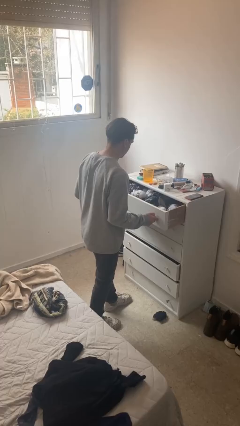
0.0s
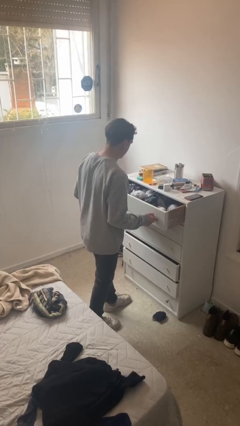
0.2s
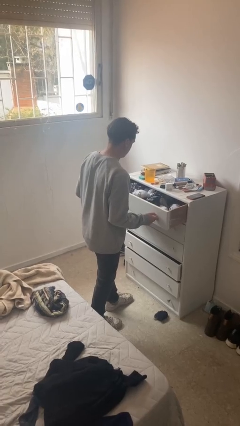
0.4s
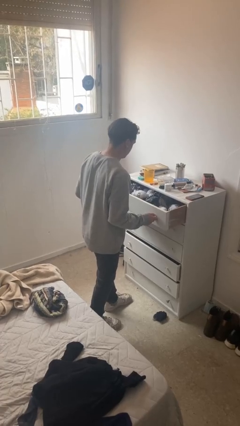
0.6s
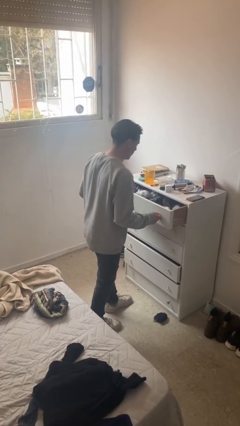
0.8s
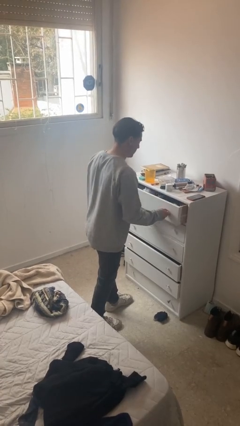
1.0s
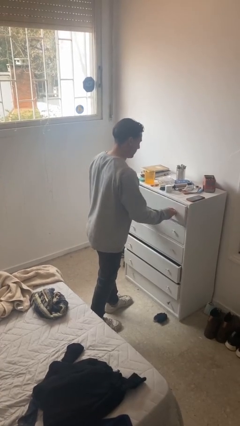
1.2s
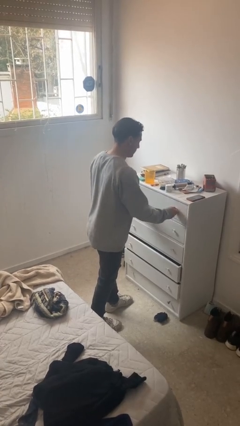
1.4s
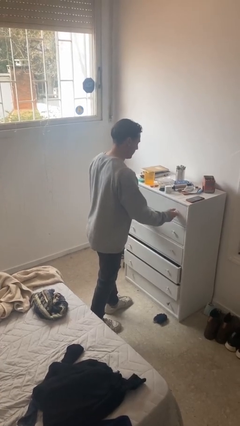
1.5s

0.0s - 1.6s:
person closes dresser drawer

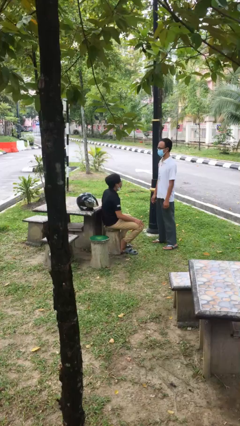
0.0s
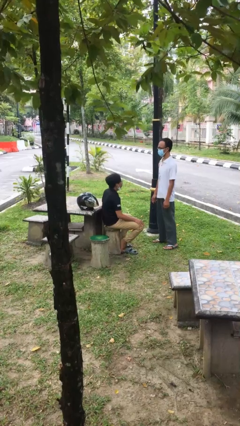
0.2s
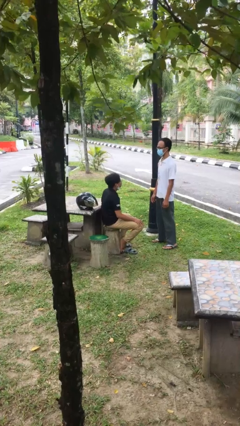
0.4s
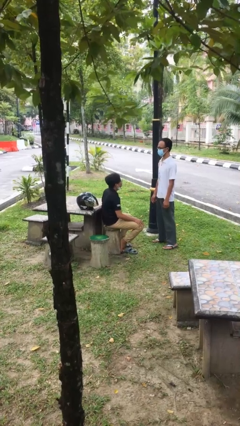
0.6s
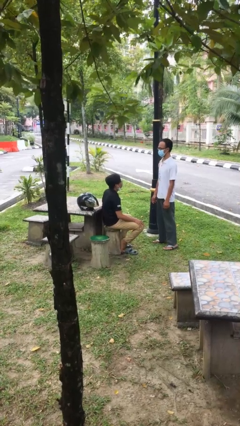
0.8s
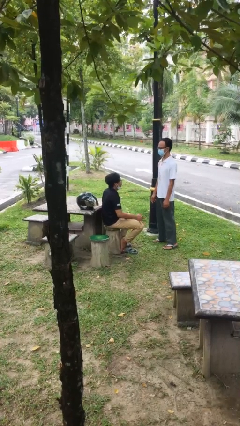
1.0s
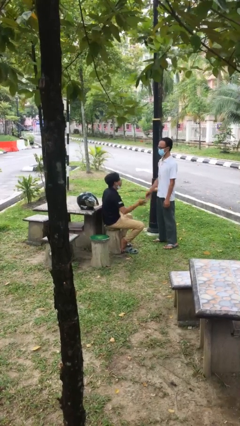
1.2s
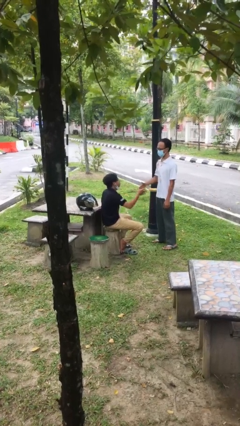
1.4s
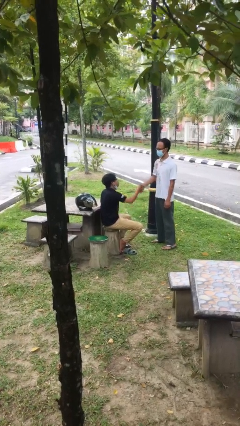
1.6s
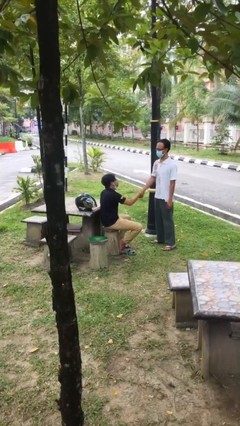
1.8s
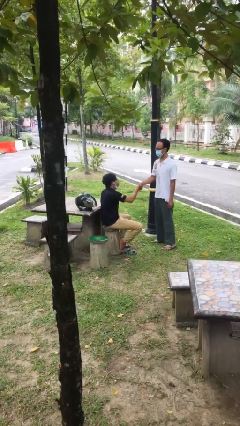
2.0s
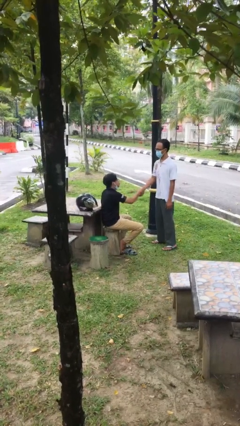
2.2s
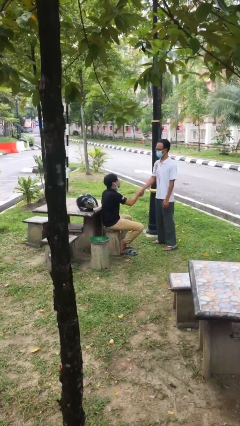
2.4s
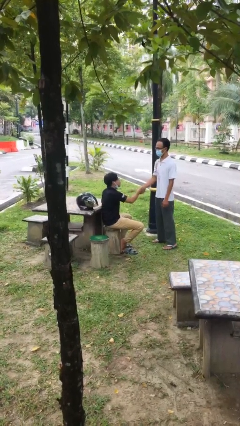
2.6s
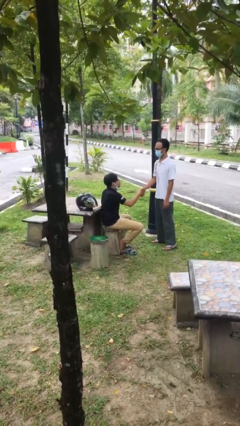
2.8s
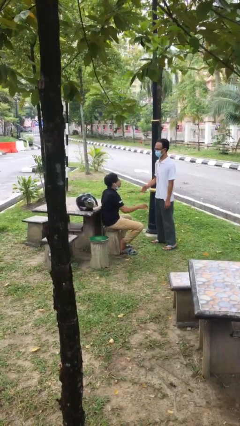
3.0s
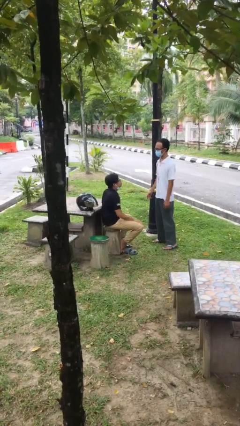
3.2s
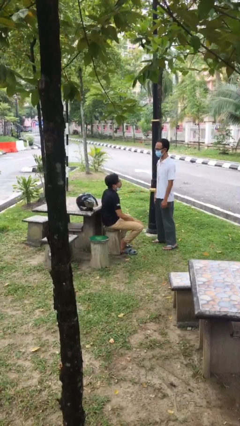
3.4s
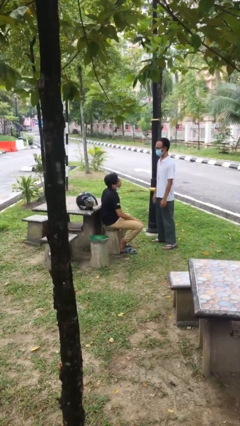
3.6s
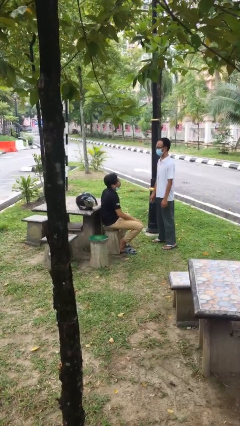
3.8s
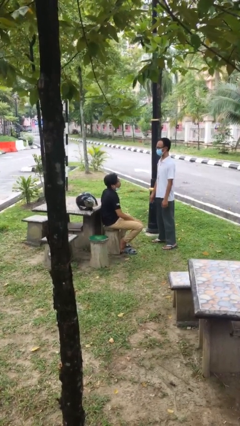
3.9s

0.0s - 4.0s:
person shakes hand

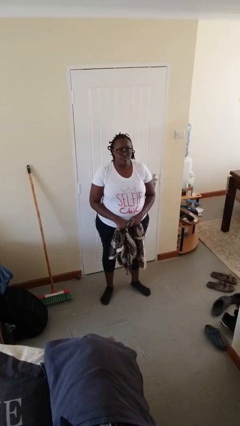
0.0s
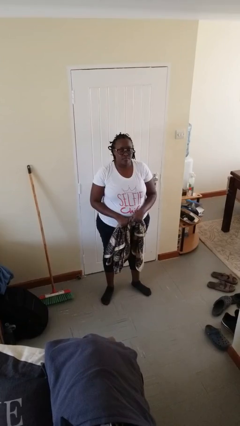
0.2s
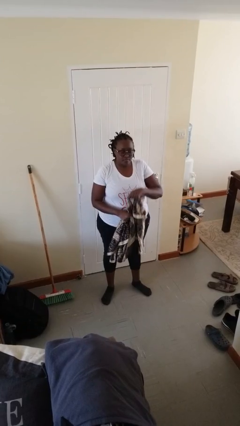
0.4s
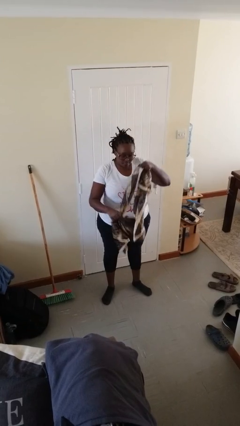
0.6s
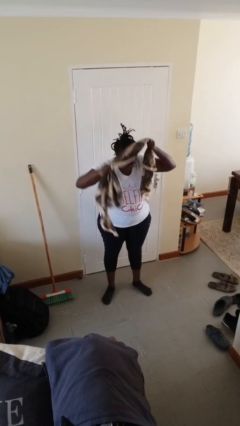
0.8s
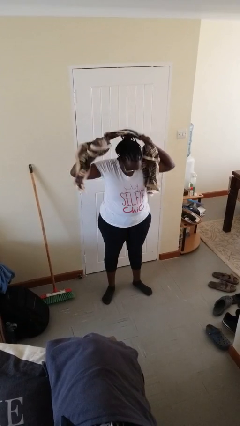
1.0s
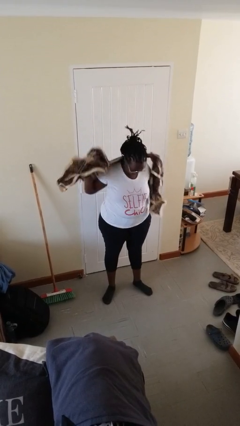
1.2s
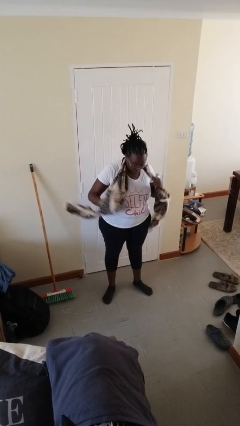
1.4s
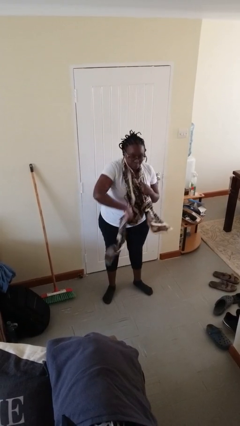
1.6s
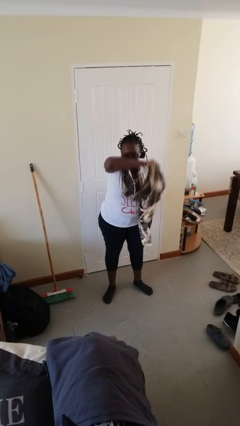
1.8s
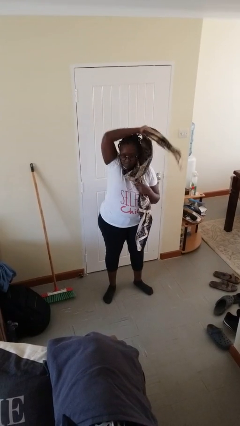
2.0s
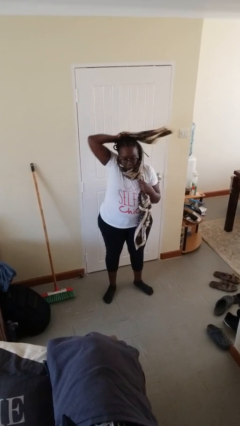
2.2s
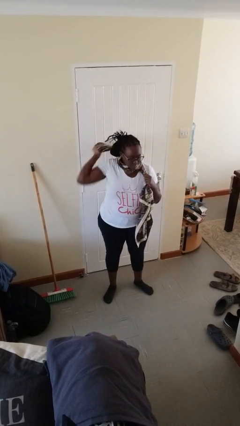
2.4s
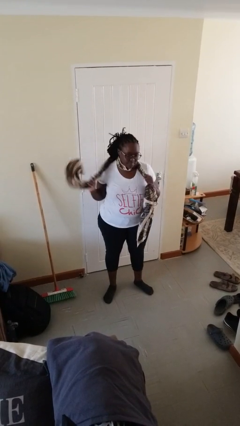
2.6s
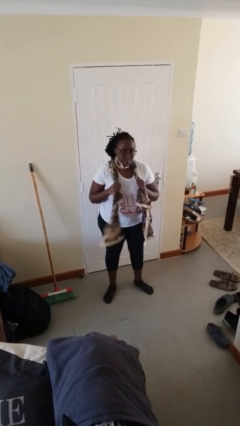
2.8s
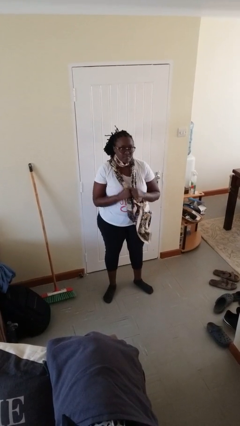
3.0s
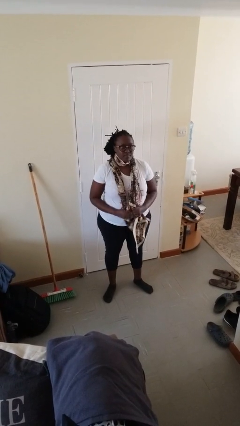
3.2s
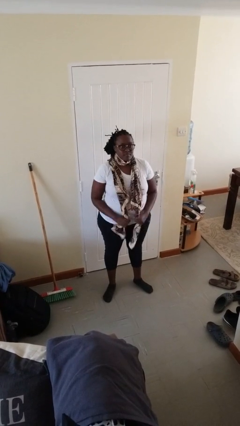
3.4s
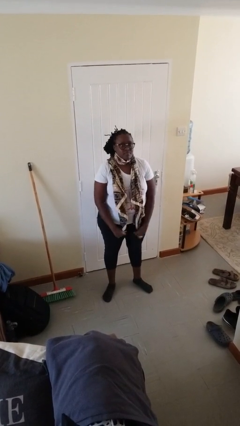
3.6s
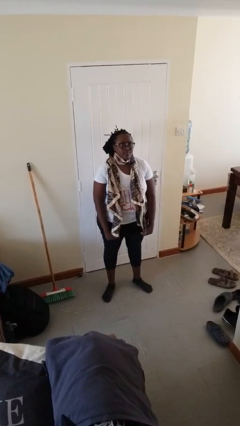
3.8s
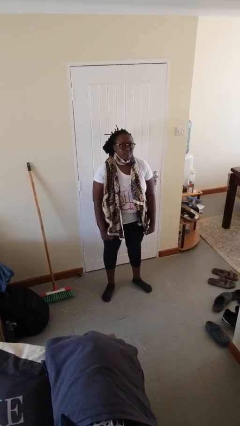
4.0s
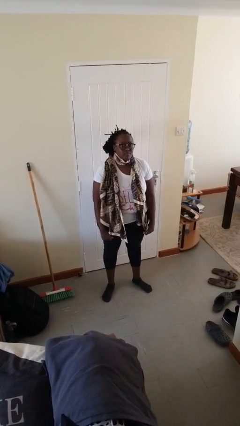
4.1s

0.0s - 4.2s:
person puts on scarf

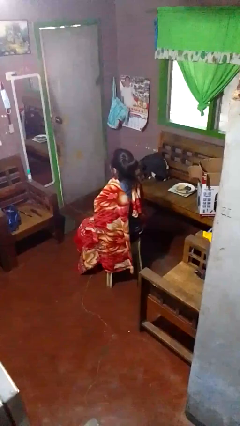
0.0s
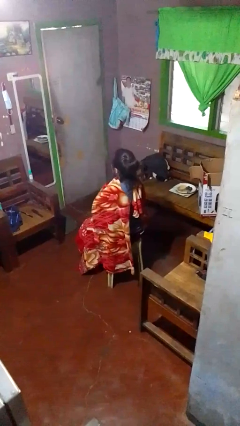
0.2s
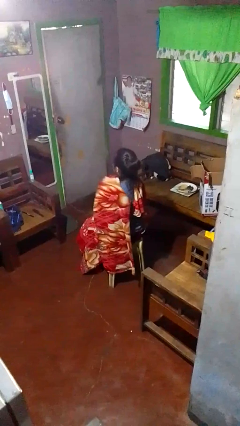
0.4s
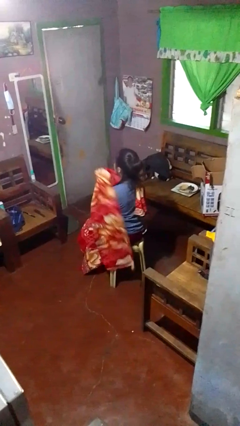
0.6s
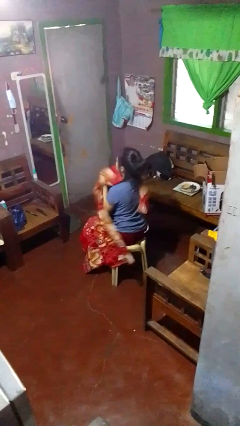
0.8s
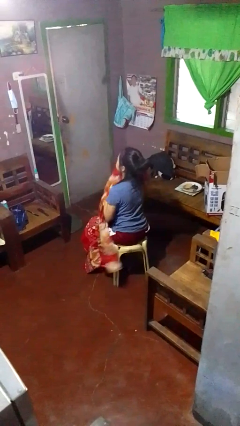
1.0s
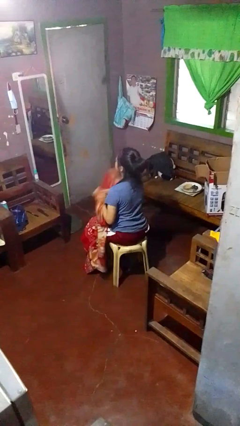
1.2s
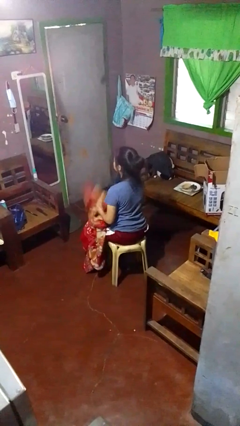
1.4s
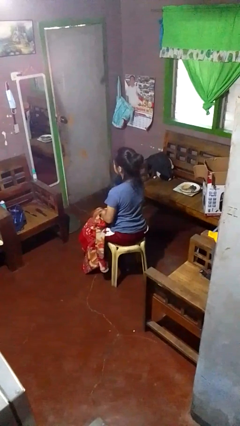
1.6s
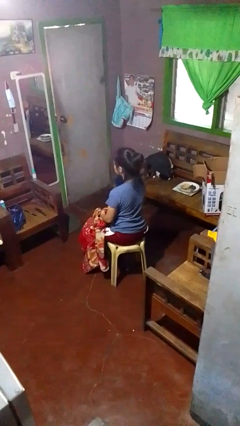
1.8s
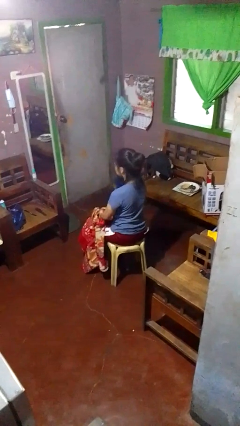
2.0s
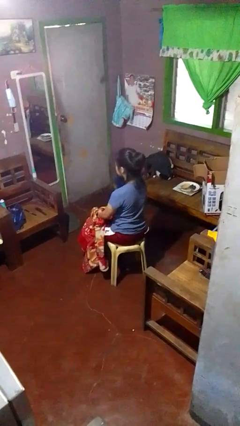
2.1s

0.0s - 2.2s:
person uncovers with blanket

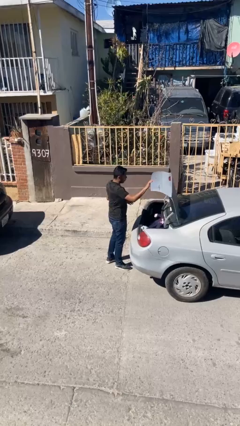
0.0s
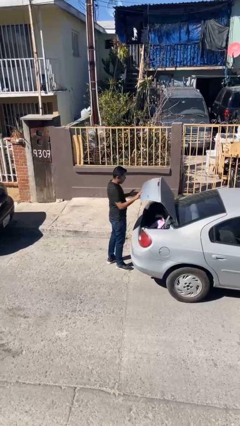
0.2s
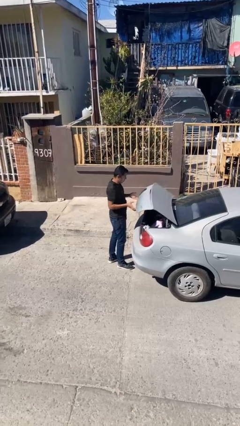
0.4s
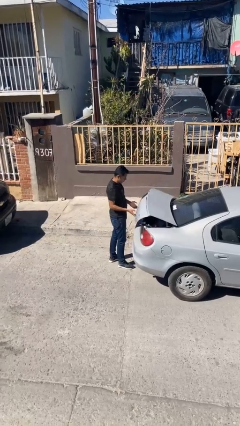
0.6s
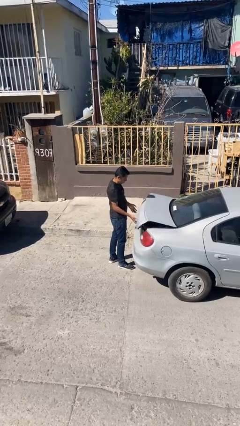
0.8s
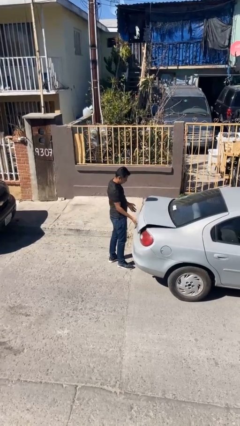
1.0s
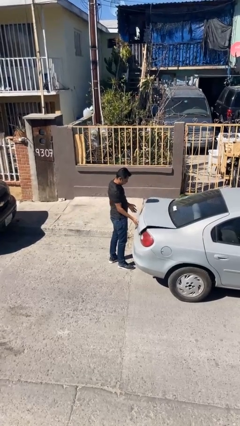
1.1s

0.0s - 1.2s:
person closes car trunk

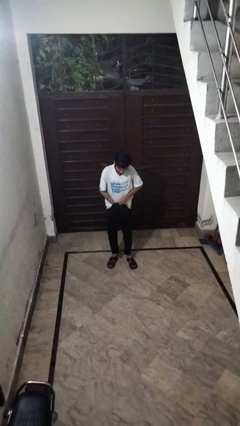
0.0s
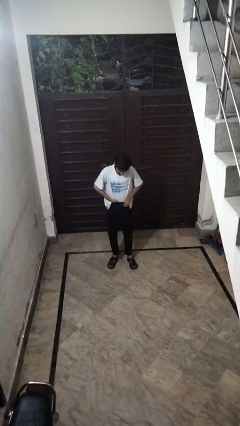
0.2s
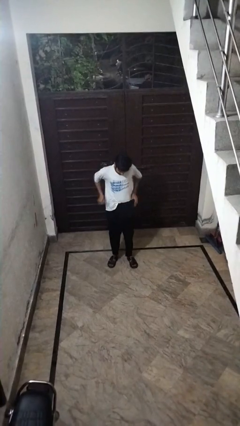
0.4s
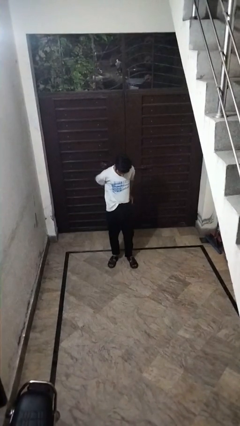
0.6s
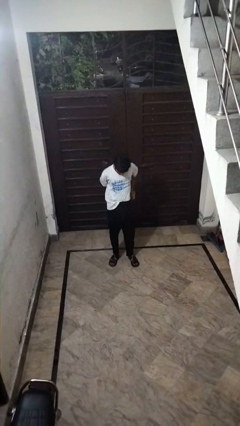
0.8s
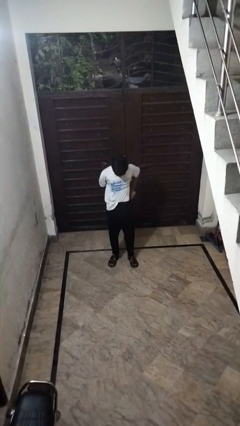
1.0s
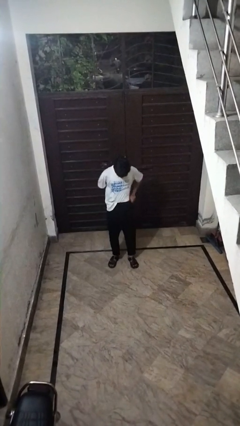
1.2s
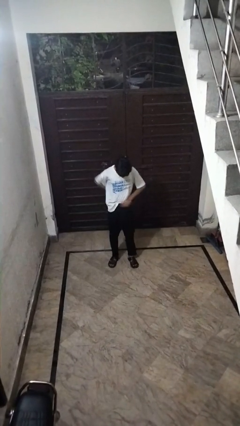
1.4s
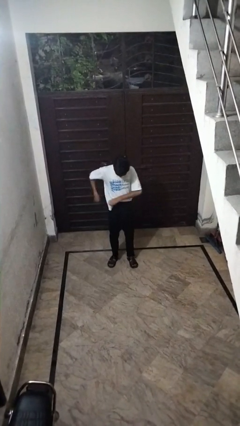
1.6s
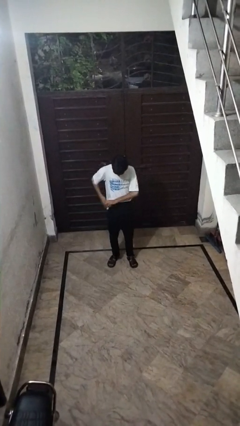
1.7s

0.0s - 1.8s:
person locks door with keys

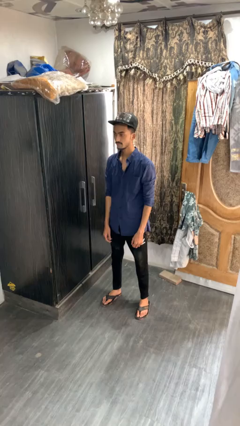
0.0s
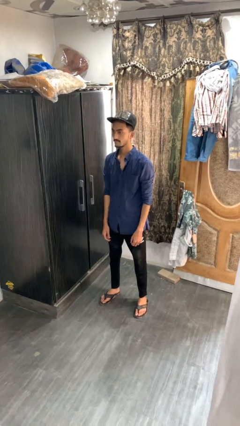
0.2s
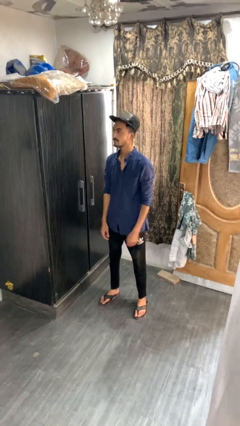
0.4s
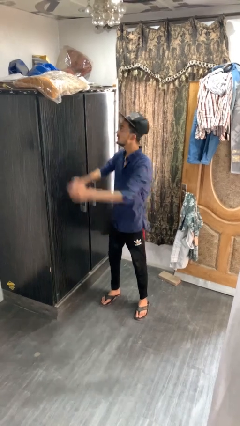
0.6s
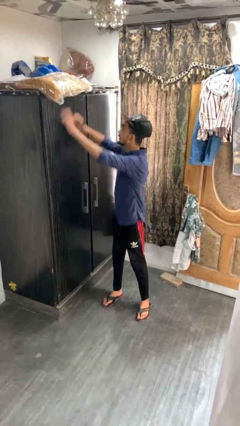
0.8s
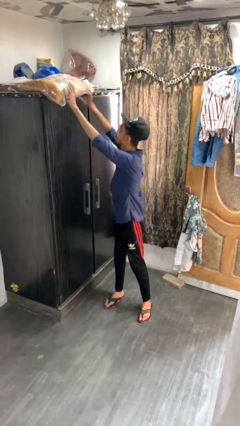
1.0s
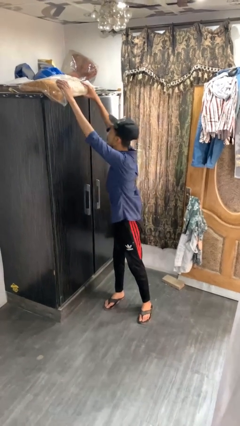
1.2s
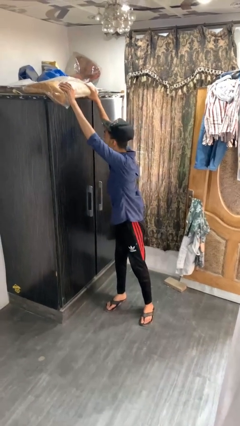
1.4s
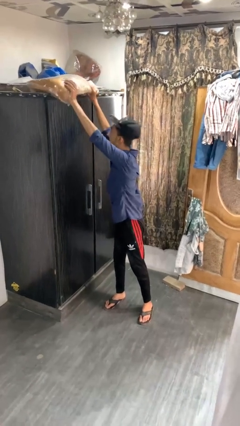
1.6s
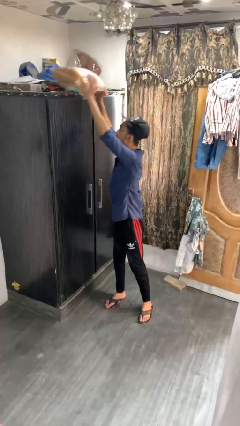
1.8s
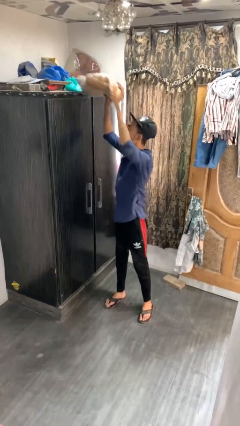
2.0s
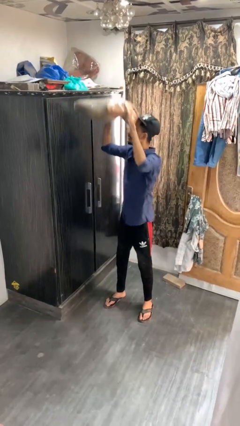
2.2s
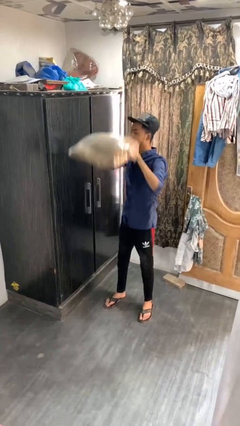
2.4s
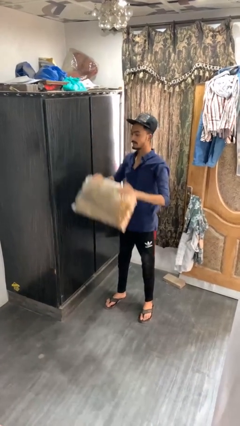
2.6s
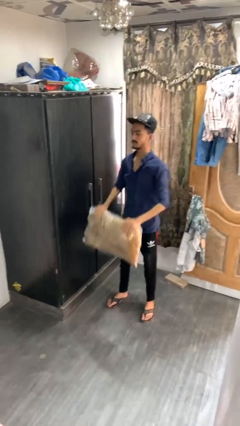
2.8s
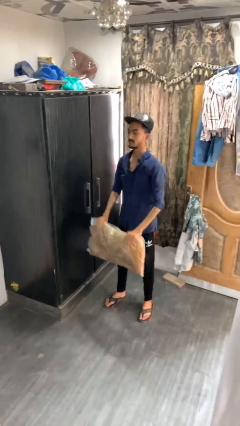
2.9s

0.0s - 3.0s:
person picks up object from shelf
